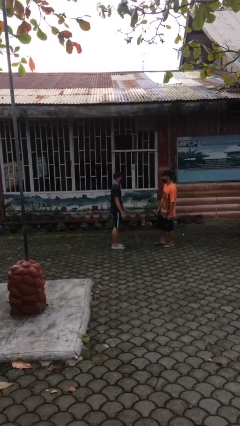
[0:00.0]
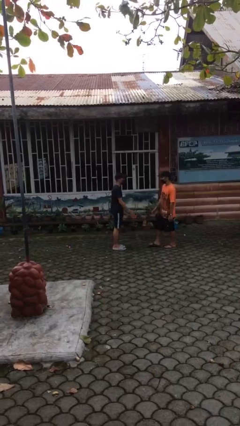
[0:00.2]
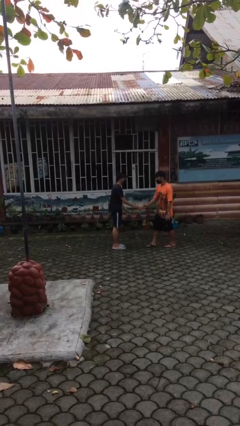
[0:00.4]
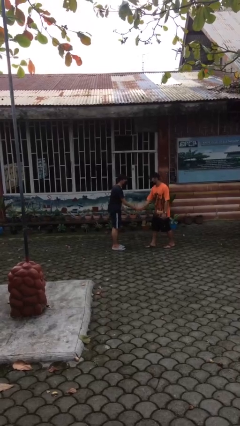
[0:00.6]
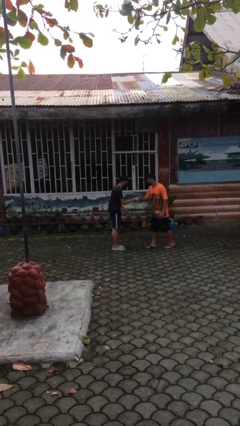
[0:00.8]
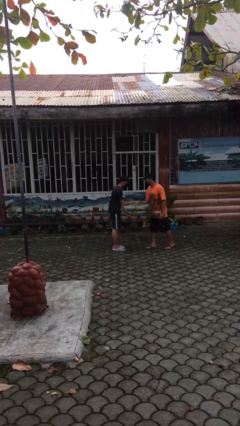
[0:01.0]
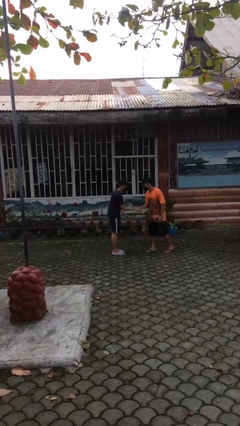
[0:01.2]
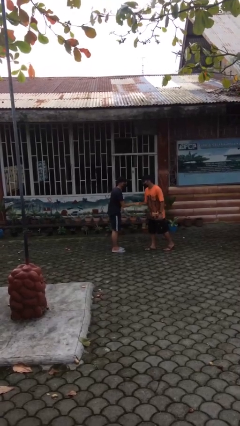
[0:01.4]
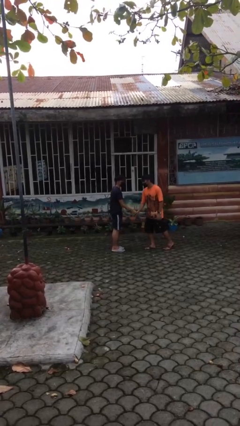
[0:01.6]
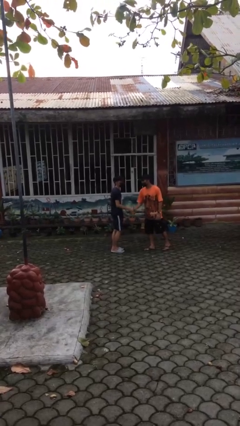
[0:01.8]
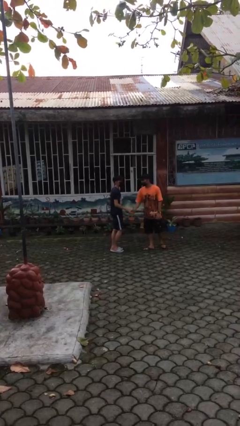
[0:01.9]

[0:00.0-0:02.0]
person shakes hand

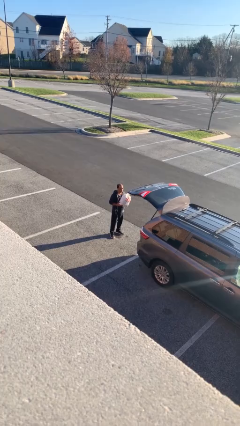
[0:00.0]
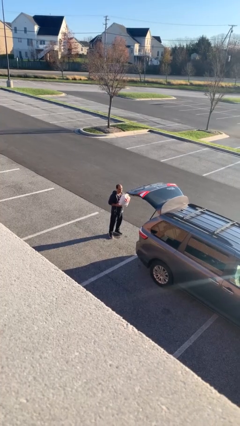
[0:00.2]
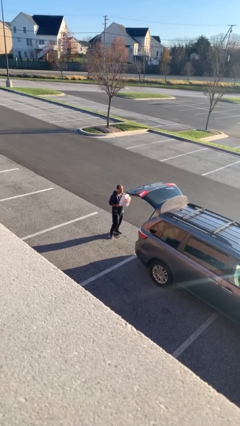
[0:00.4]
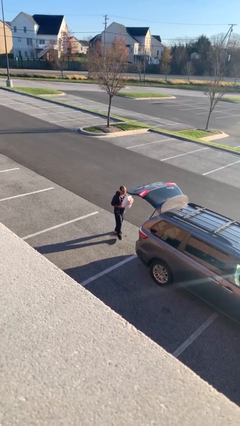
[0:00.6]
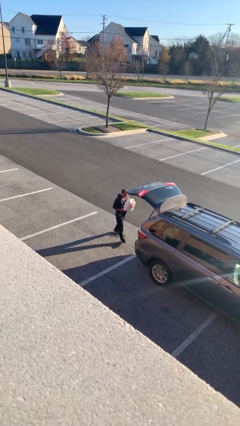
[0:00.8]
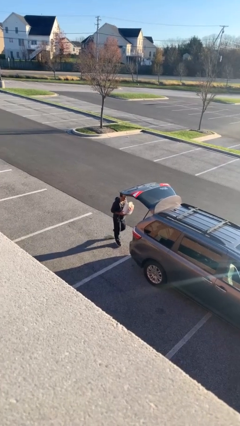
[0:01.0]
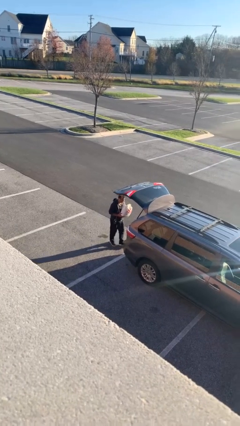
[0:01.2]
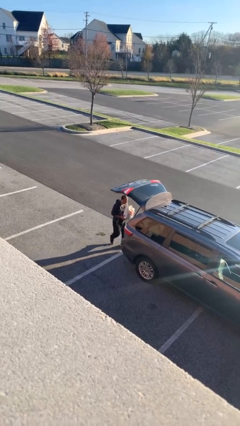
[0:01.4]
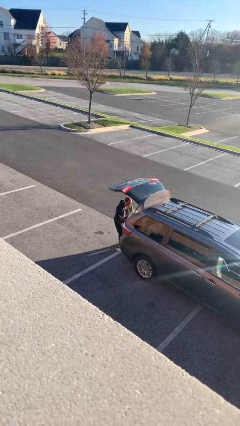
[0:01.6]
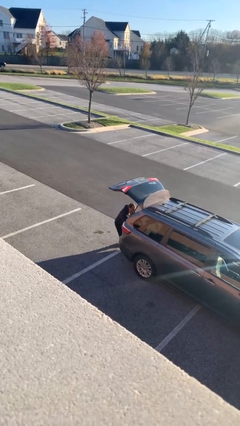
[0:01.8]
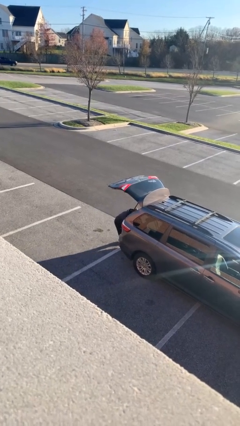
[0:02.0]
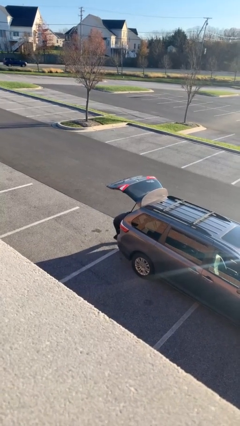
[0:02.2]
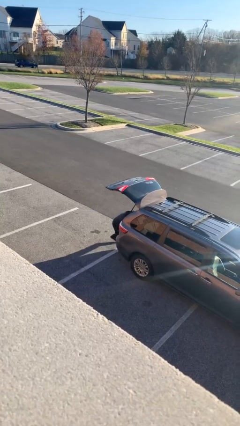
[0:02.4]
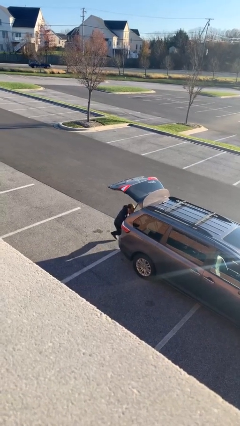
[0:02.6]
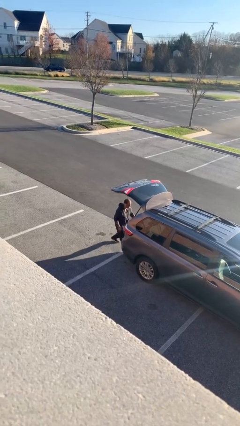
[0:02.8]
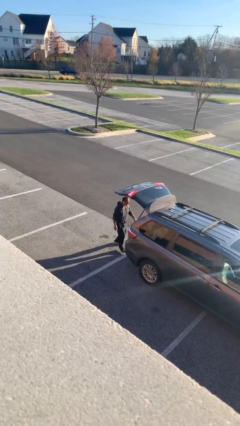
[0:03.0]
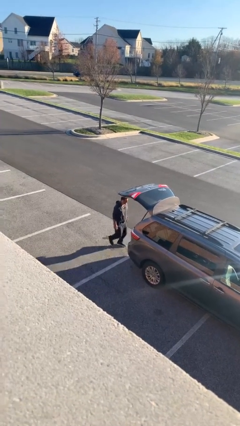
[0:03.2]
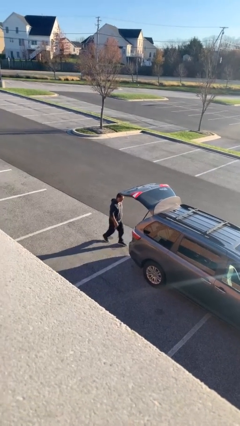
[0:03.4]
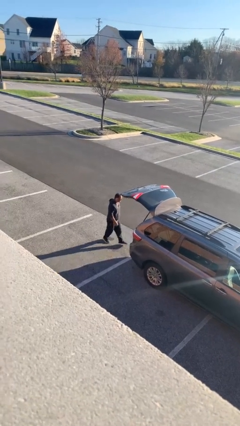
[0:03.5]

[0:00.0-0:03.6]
person loads car

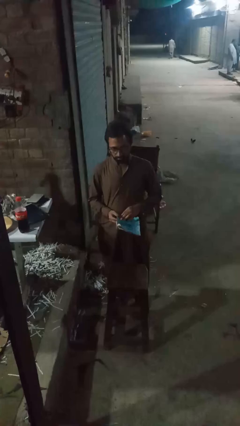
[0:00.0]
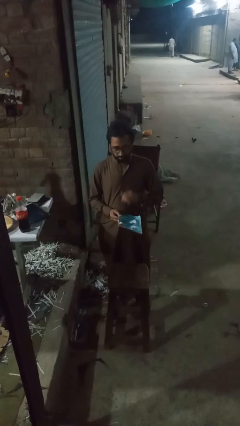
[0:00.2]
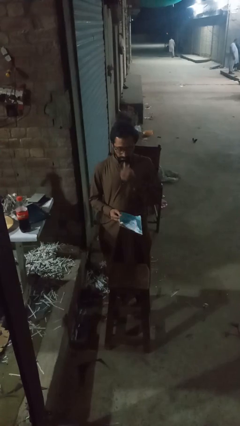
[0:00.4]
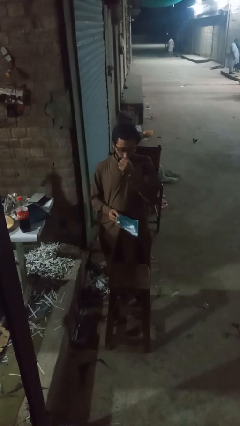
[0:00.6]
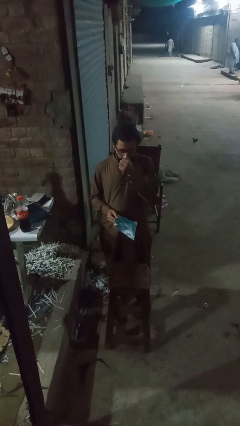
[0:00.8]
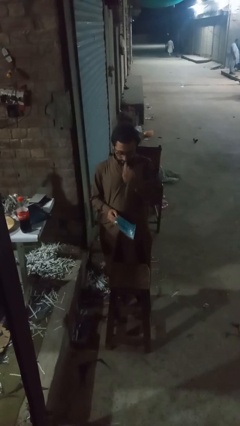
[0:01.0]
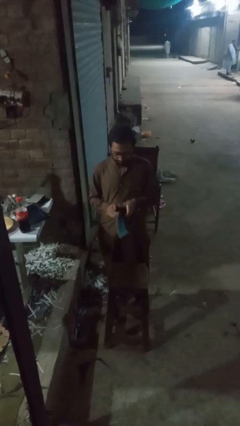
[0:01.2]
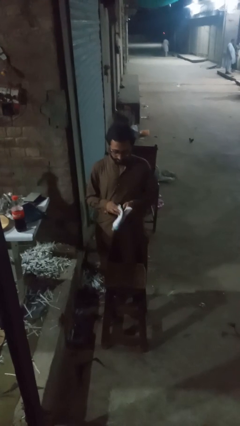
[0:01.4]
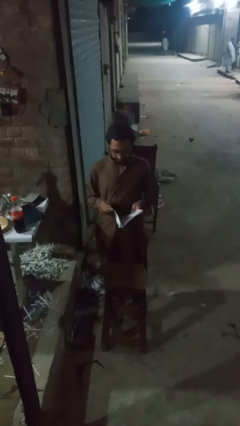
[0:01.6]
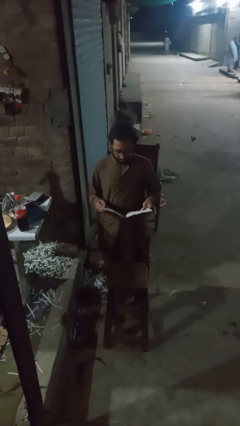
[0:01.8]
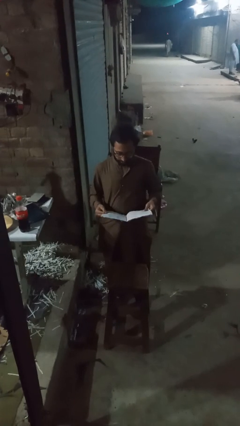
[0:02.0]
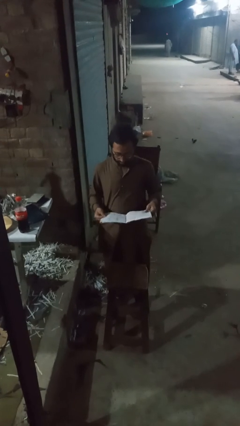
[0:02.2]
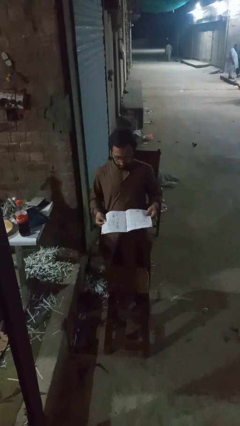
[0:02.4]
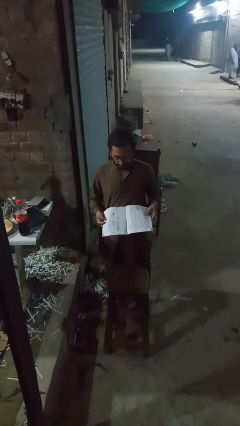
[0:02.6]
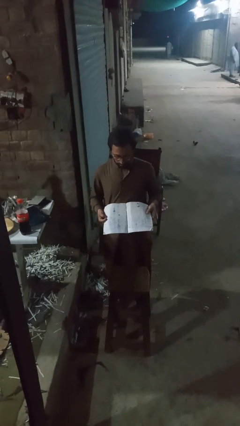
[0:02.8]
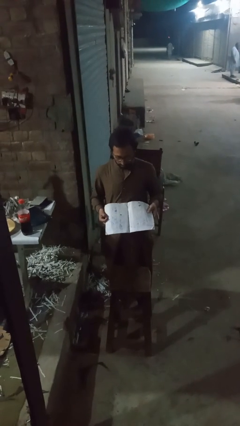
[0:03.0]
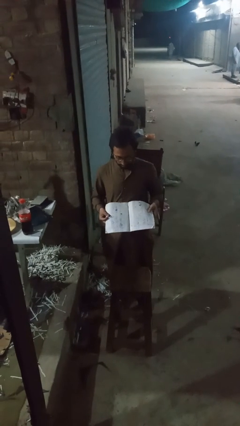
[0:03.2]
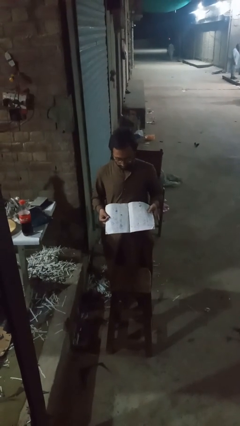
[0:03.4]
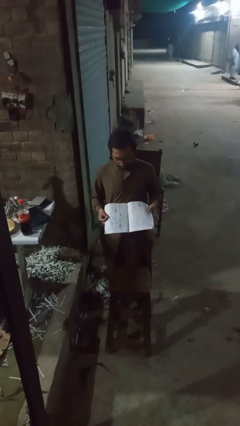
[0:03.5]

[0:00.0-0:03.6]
person reads newspaper

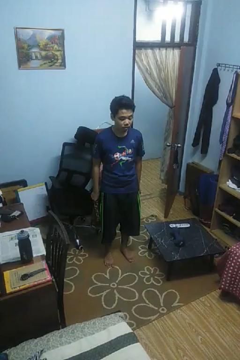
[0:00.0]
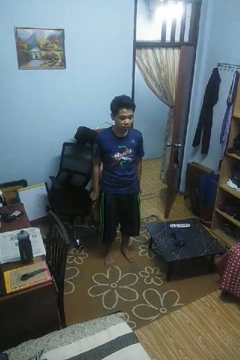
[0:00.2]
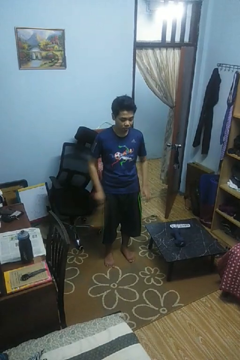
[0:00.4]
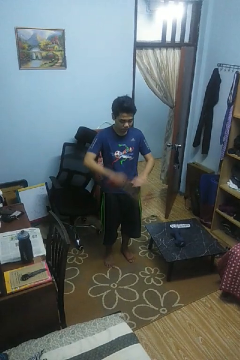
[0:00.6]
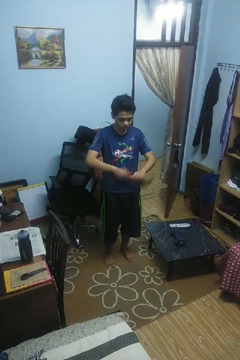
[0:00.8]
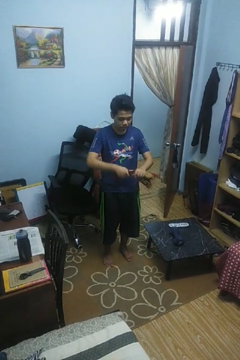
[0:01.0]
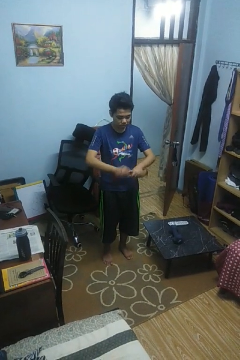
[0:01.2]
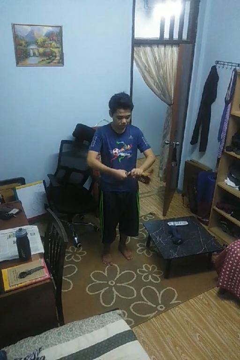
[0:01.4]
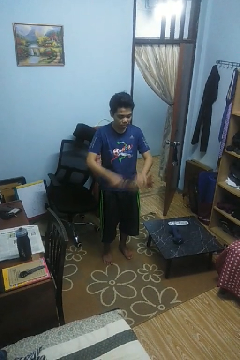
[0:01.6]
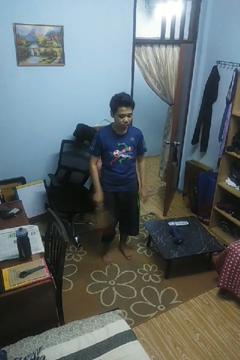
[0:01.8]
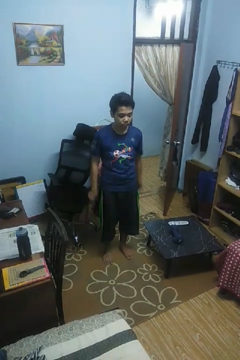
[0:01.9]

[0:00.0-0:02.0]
person squeezes object

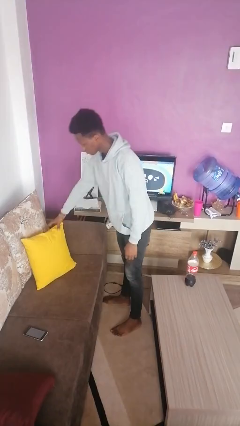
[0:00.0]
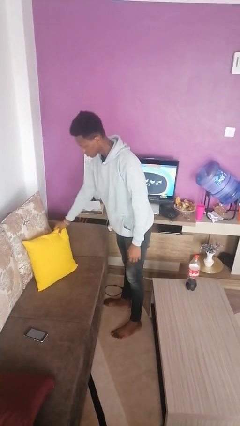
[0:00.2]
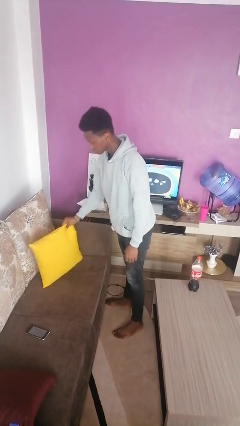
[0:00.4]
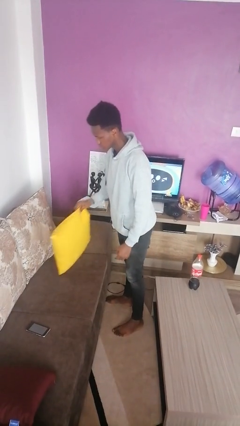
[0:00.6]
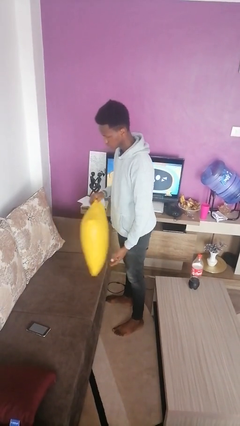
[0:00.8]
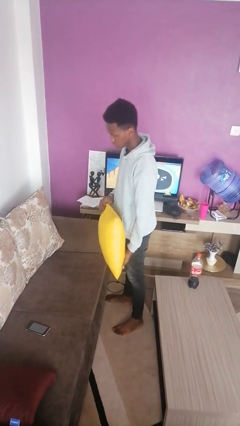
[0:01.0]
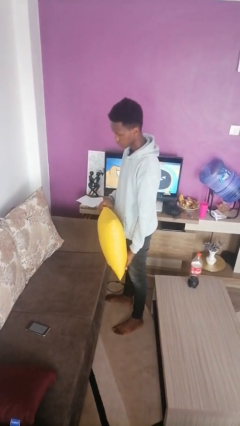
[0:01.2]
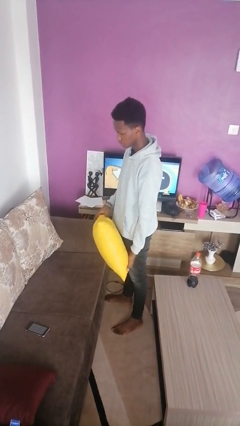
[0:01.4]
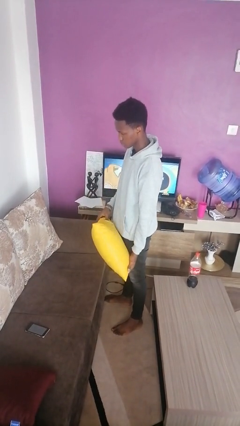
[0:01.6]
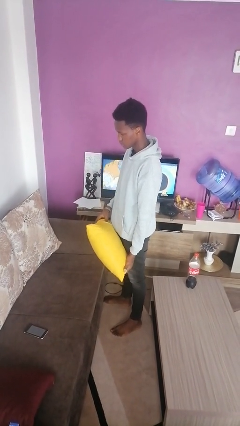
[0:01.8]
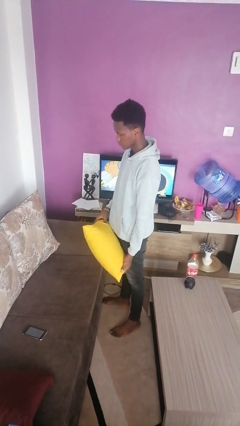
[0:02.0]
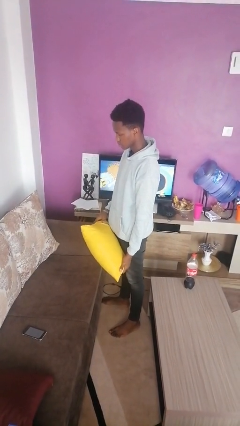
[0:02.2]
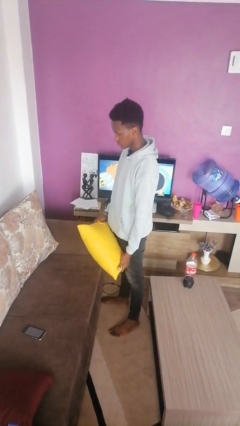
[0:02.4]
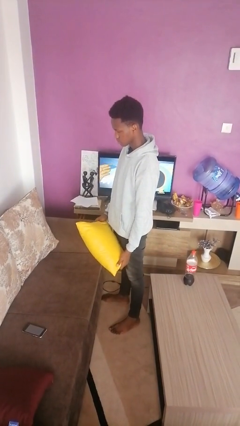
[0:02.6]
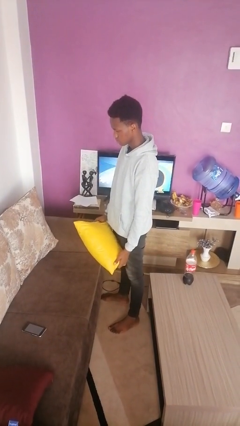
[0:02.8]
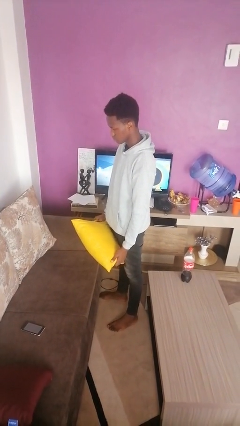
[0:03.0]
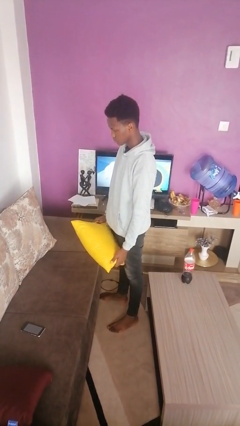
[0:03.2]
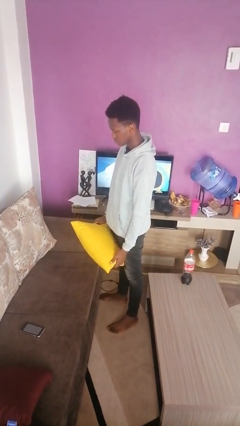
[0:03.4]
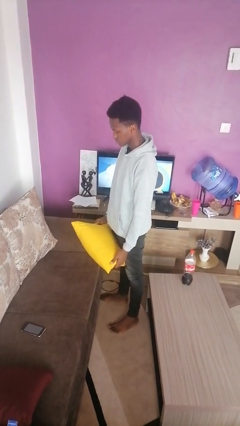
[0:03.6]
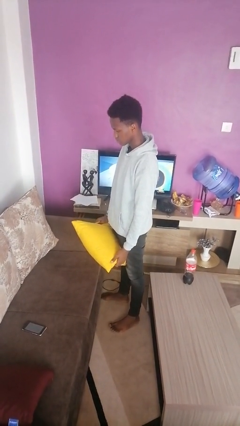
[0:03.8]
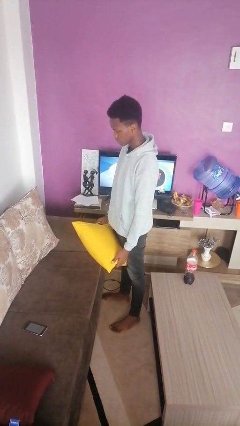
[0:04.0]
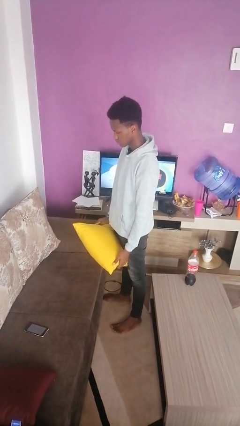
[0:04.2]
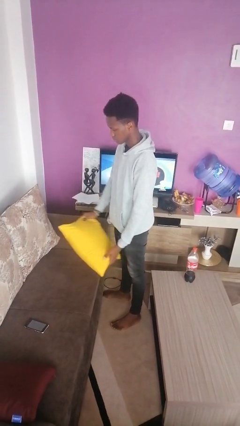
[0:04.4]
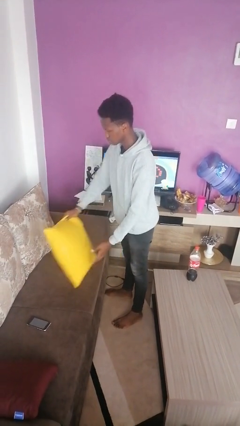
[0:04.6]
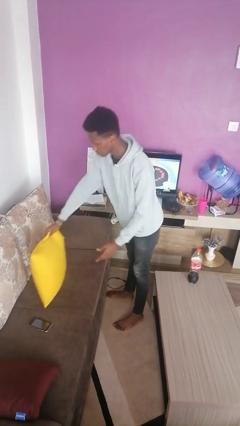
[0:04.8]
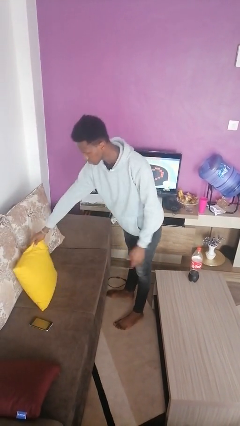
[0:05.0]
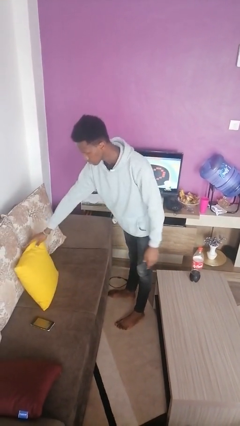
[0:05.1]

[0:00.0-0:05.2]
person picks up object from couch

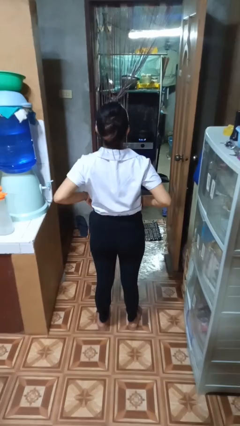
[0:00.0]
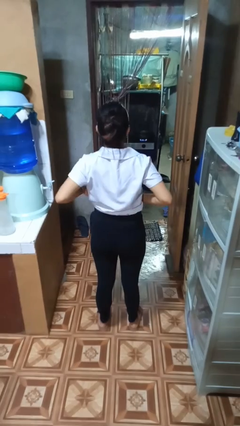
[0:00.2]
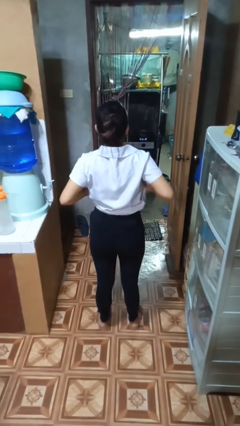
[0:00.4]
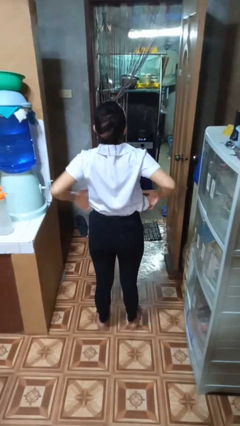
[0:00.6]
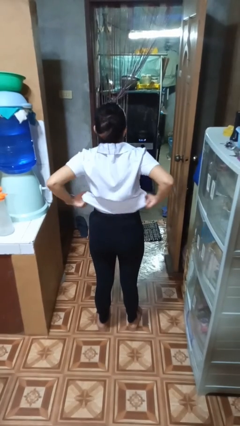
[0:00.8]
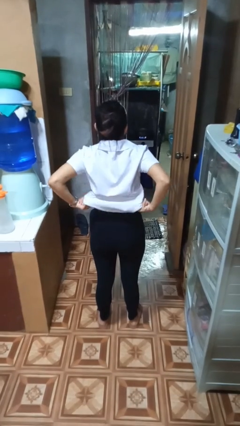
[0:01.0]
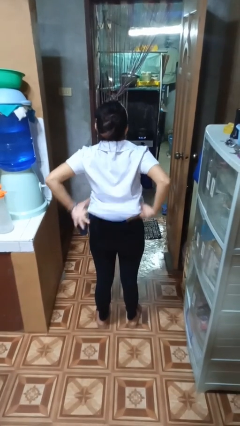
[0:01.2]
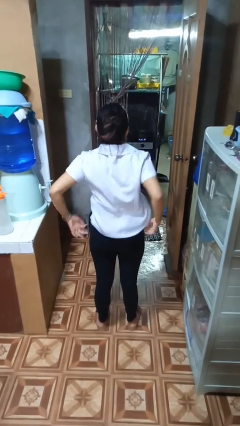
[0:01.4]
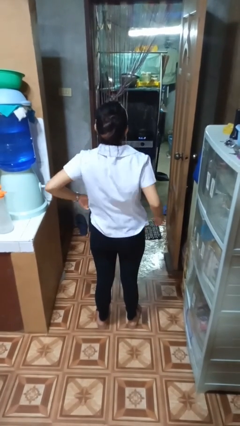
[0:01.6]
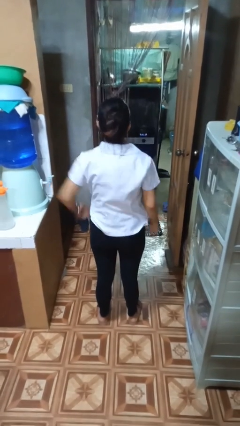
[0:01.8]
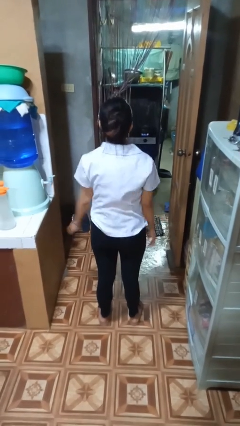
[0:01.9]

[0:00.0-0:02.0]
person untucks shirt
